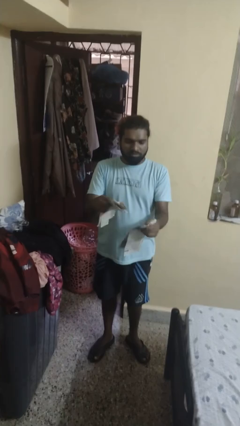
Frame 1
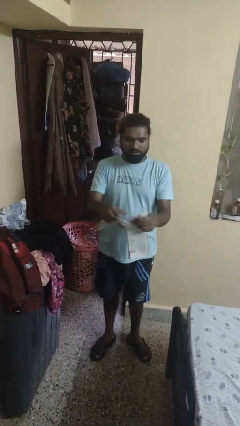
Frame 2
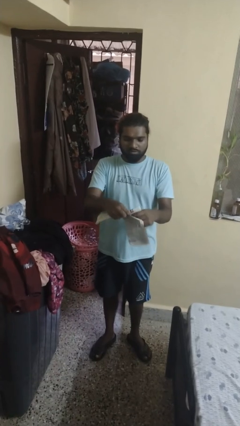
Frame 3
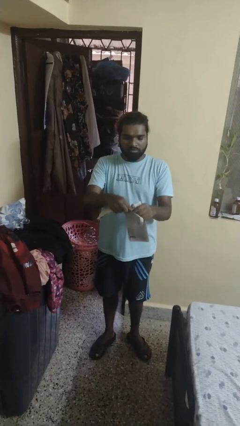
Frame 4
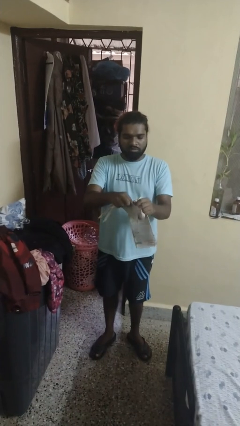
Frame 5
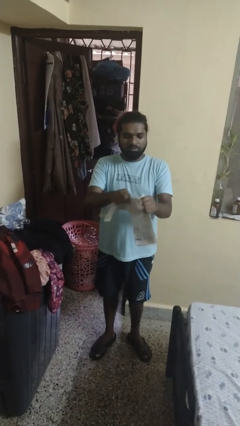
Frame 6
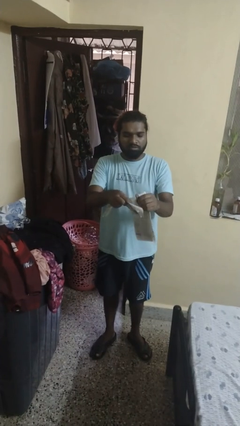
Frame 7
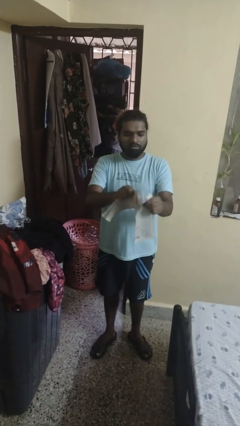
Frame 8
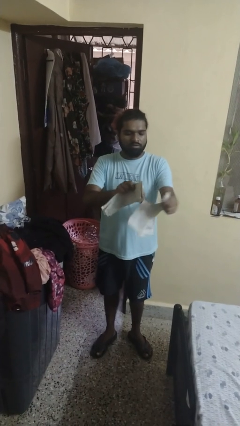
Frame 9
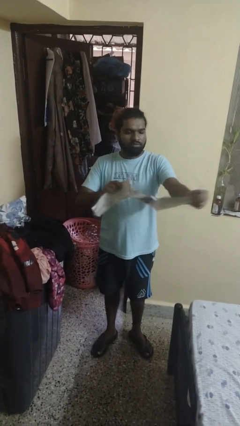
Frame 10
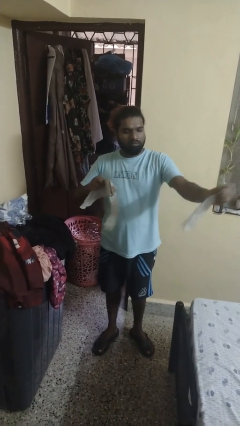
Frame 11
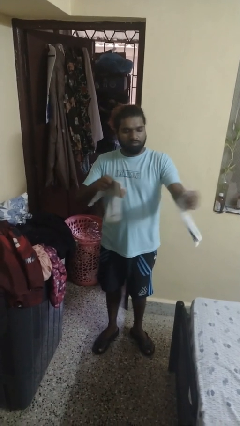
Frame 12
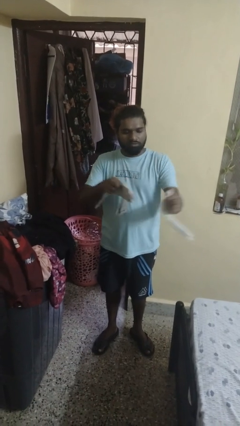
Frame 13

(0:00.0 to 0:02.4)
person tears paper

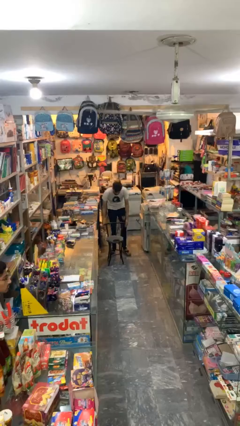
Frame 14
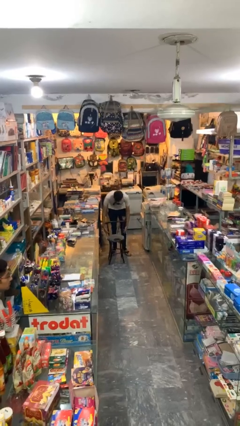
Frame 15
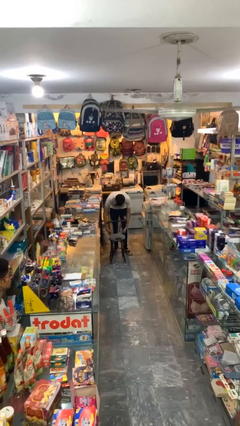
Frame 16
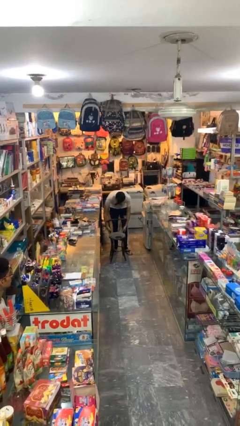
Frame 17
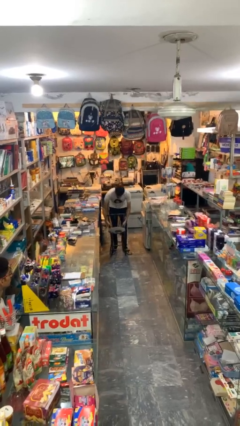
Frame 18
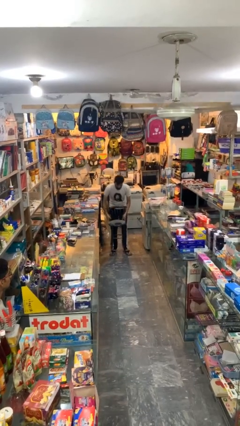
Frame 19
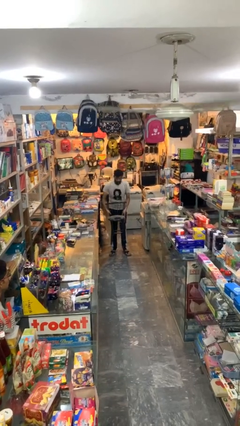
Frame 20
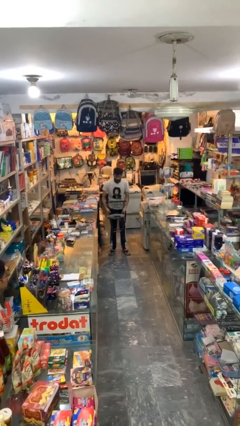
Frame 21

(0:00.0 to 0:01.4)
person picks up object from floor

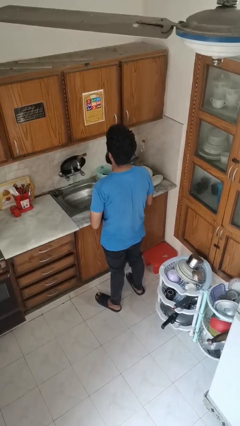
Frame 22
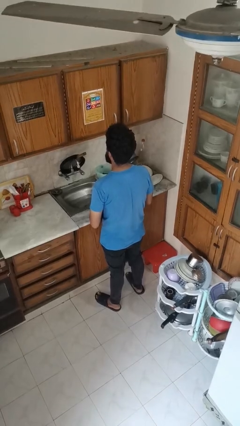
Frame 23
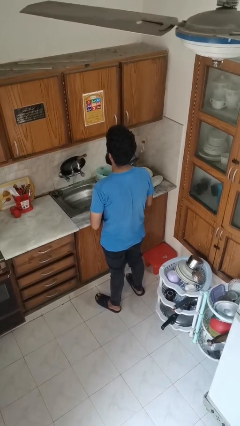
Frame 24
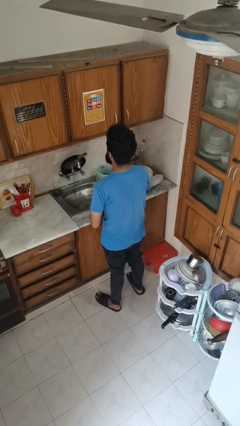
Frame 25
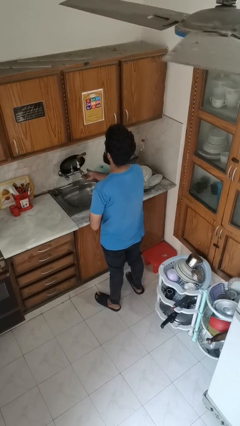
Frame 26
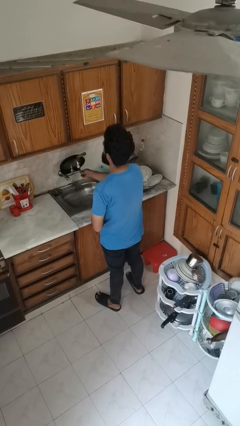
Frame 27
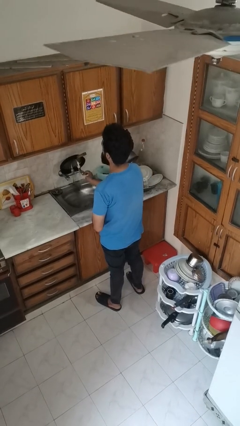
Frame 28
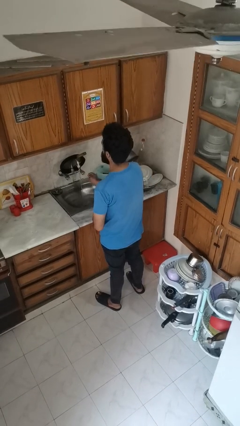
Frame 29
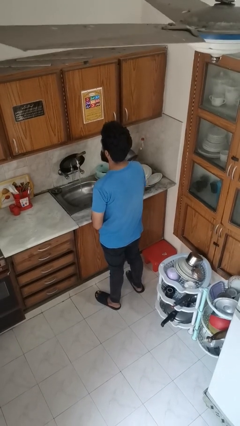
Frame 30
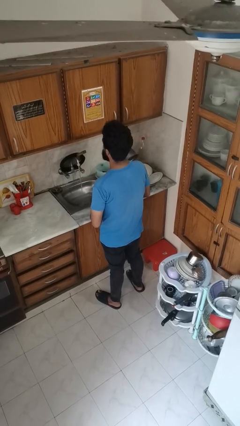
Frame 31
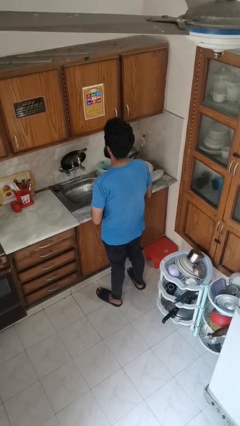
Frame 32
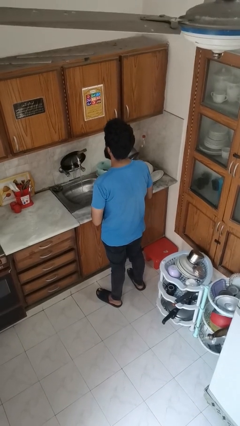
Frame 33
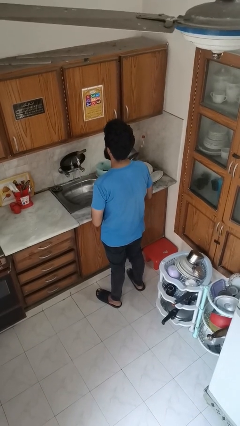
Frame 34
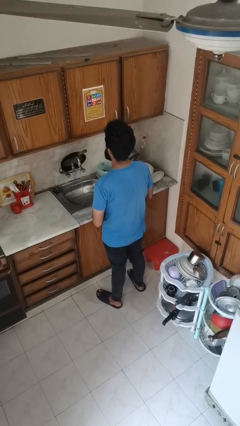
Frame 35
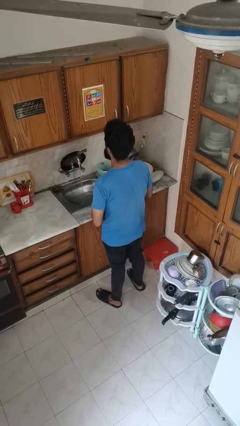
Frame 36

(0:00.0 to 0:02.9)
person turns on faucet

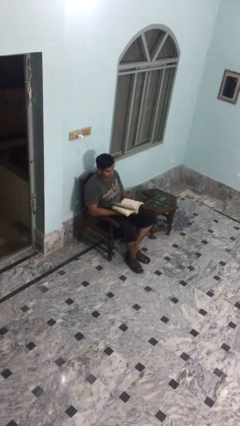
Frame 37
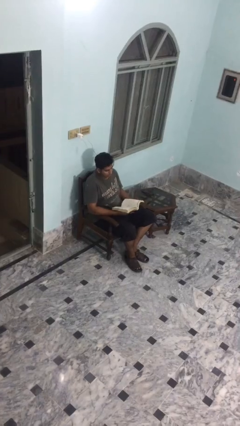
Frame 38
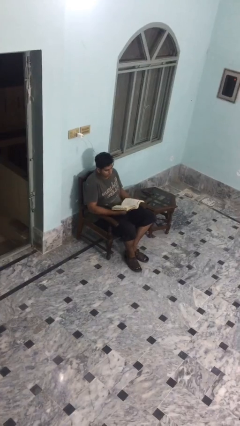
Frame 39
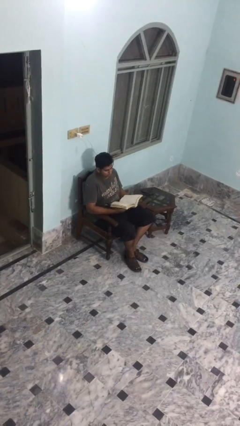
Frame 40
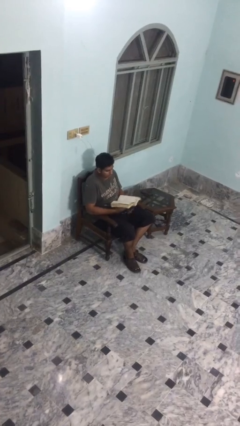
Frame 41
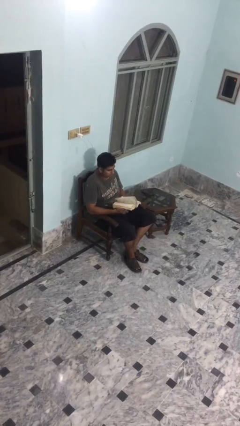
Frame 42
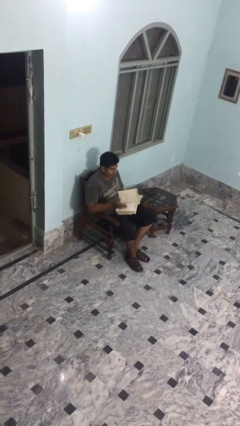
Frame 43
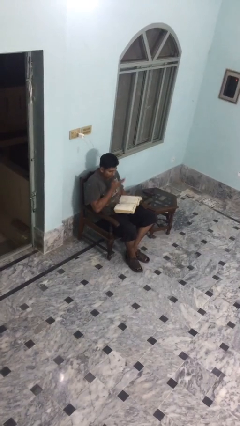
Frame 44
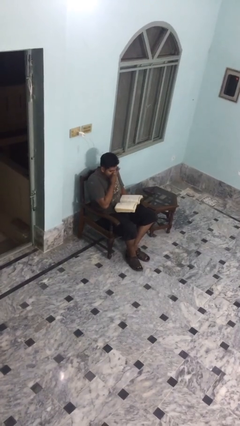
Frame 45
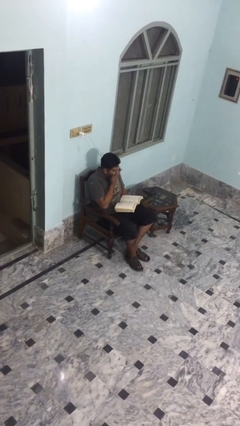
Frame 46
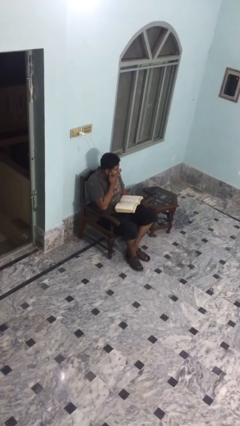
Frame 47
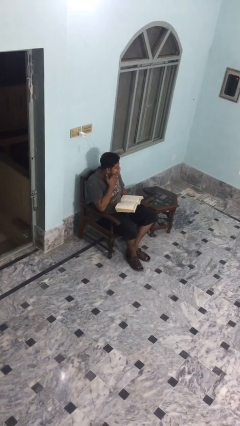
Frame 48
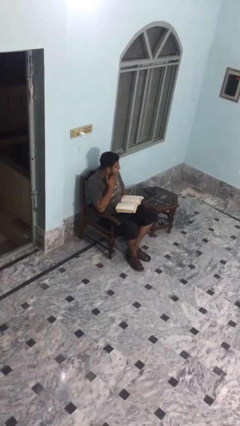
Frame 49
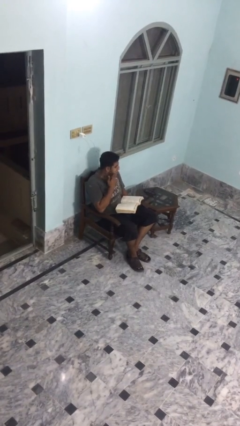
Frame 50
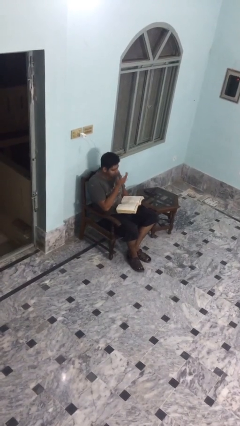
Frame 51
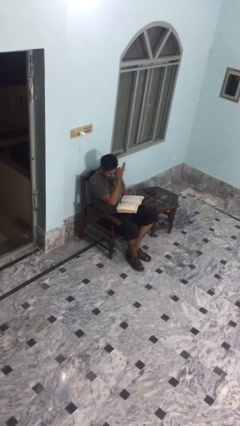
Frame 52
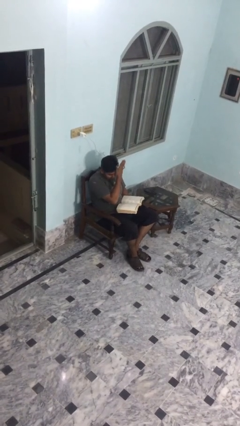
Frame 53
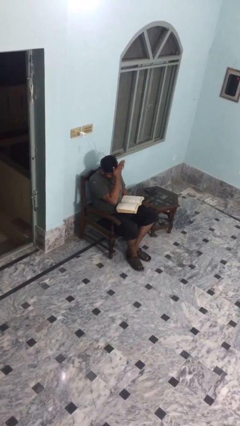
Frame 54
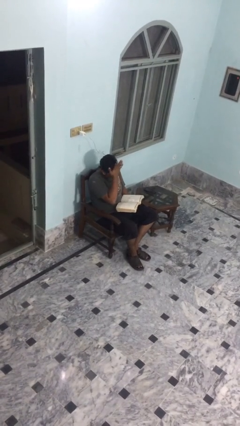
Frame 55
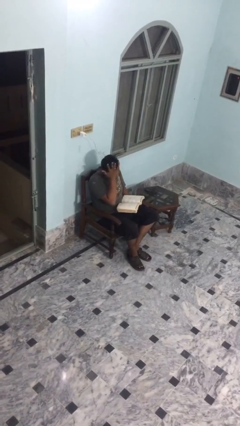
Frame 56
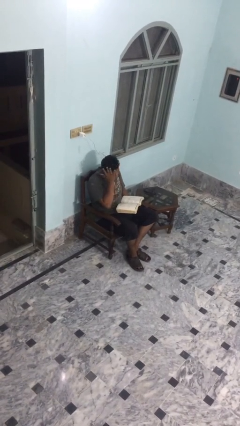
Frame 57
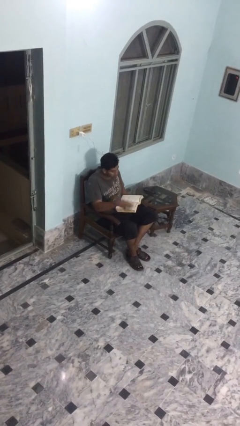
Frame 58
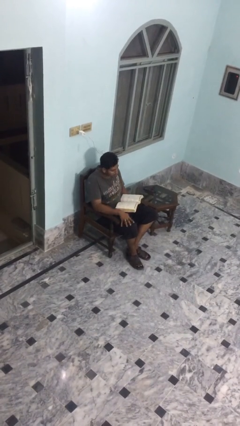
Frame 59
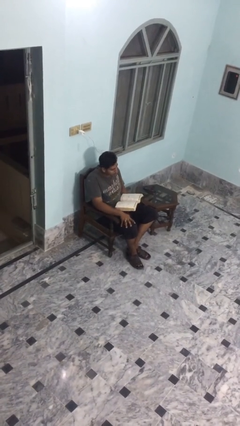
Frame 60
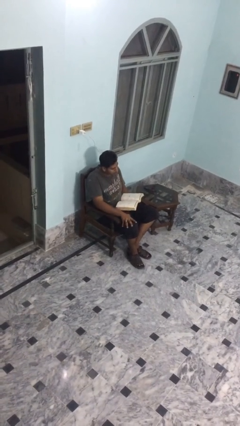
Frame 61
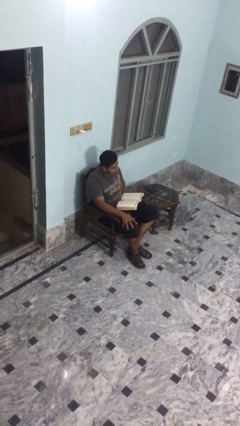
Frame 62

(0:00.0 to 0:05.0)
person reads document

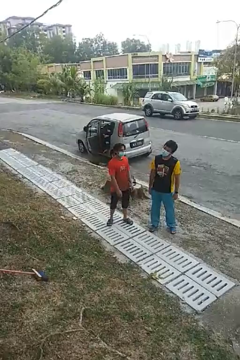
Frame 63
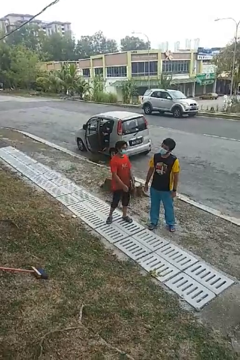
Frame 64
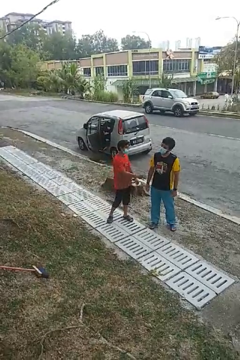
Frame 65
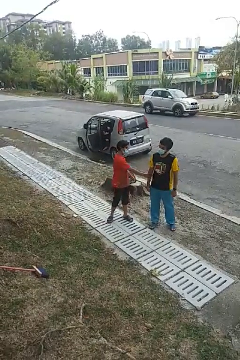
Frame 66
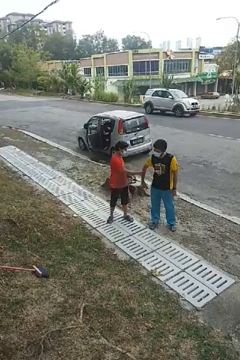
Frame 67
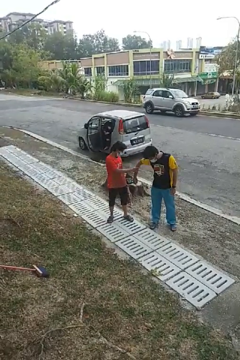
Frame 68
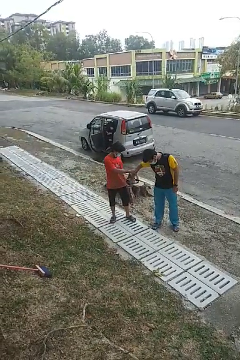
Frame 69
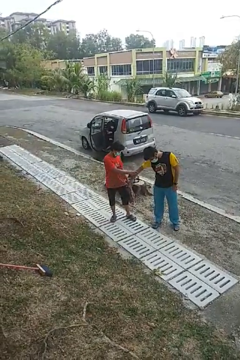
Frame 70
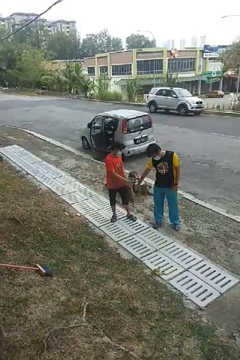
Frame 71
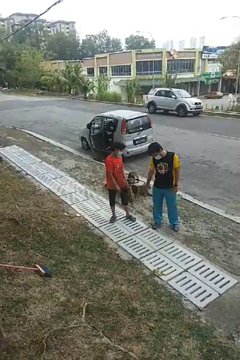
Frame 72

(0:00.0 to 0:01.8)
person grabs person by forearm

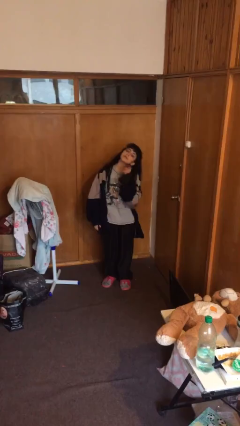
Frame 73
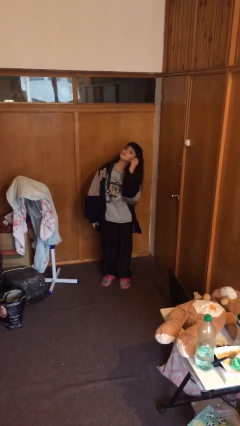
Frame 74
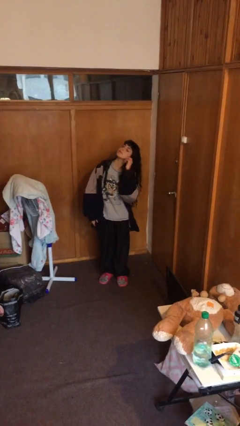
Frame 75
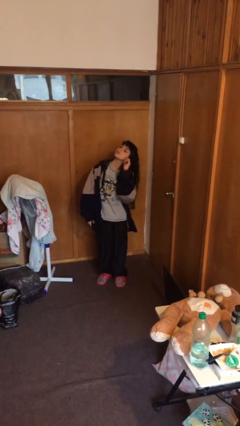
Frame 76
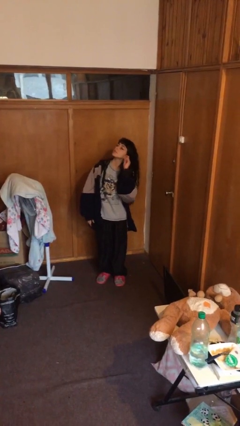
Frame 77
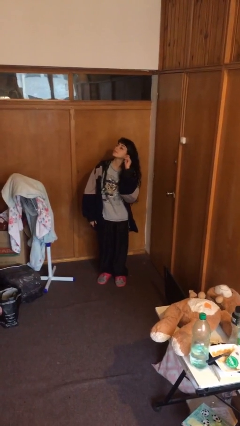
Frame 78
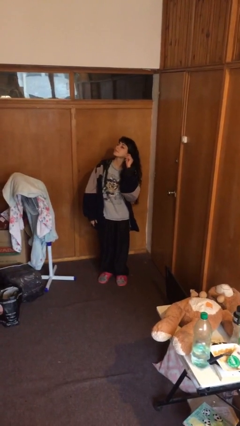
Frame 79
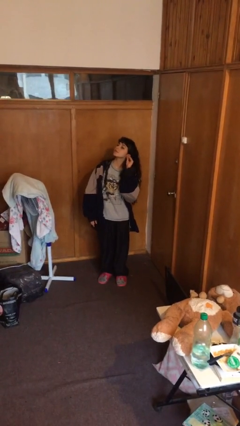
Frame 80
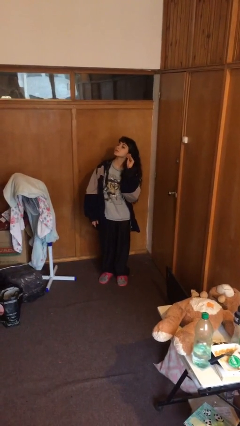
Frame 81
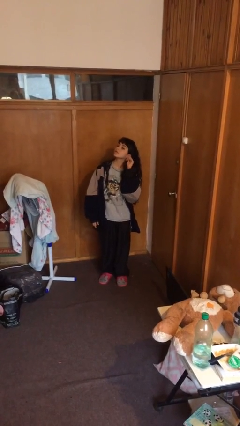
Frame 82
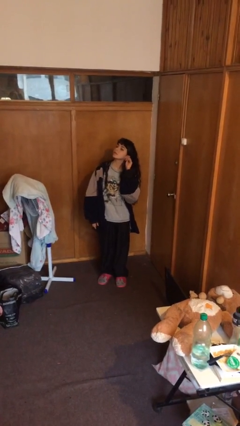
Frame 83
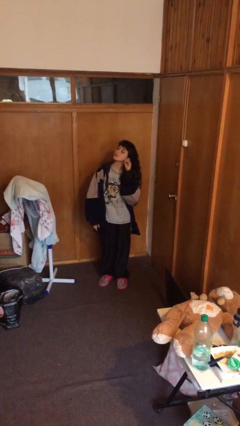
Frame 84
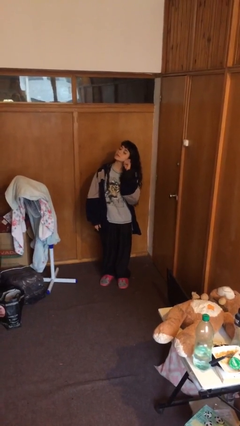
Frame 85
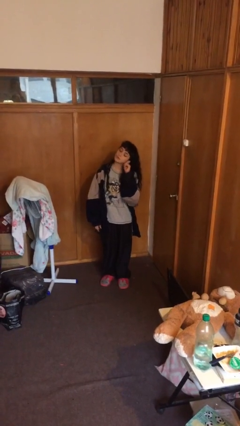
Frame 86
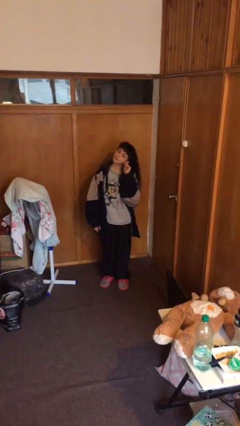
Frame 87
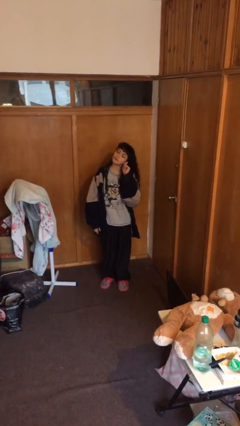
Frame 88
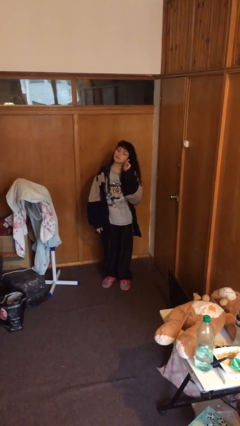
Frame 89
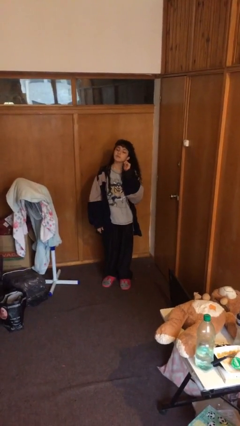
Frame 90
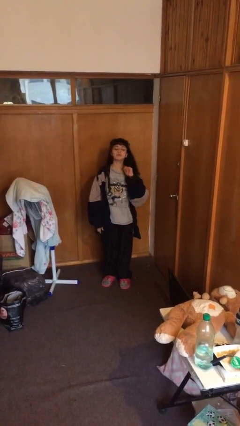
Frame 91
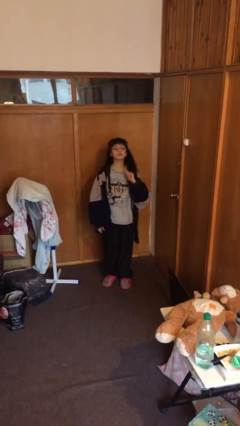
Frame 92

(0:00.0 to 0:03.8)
person touches earlobe
